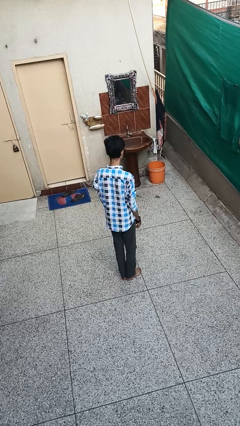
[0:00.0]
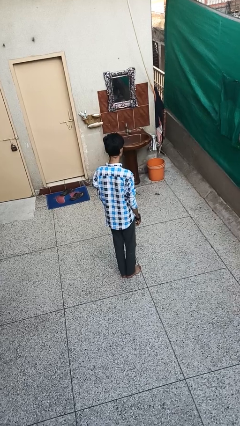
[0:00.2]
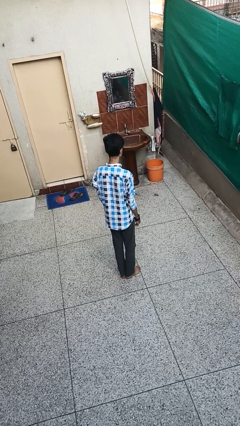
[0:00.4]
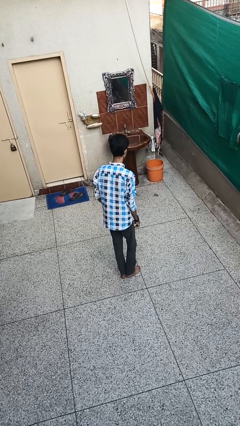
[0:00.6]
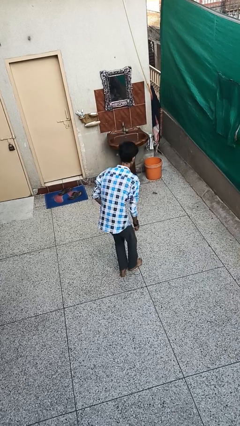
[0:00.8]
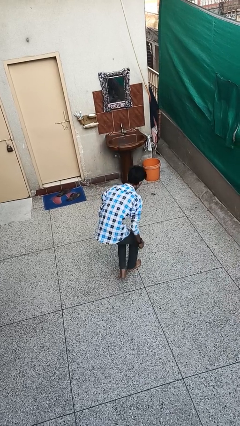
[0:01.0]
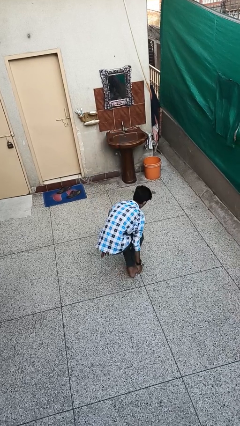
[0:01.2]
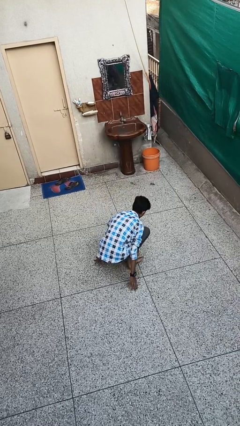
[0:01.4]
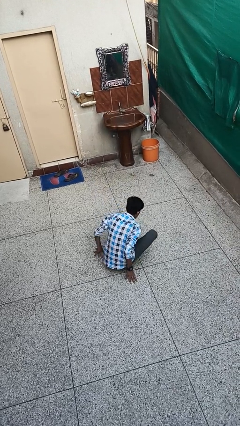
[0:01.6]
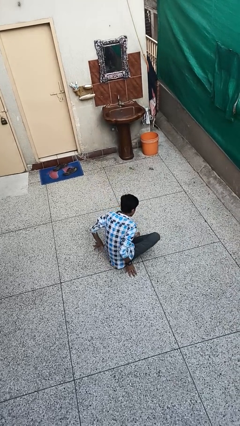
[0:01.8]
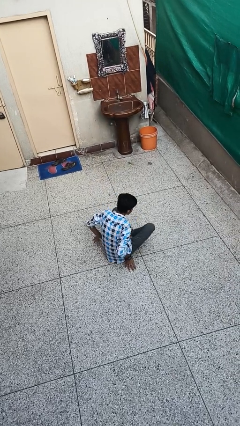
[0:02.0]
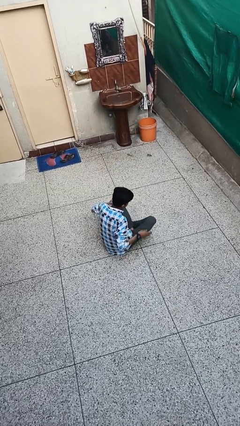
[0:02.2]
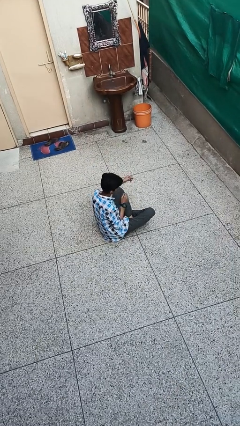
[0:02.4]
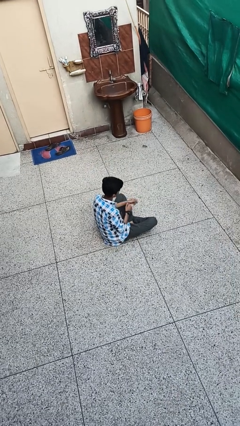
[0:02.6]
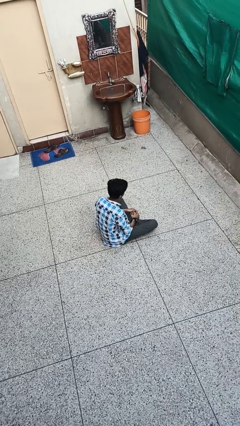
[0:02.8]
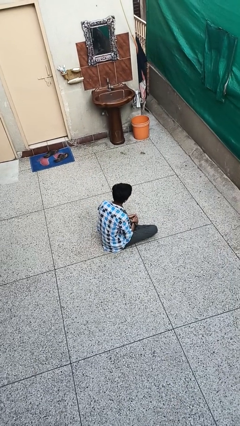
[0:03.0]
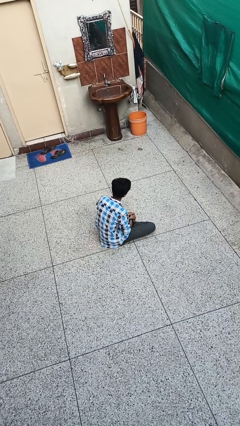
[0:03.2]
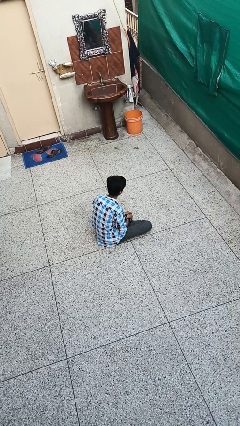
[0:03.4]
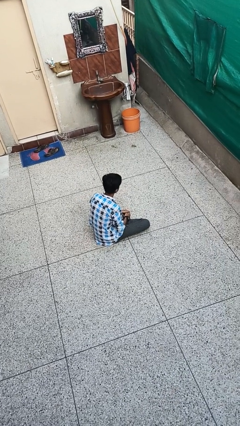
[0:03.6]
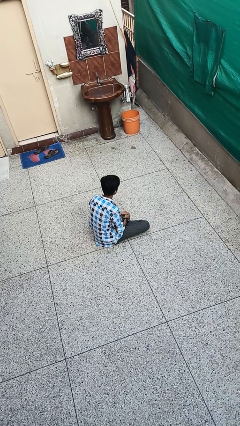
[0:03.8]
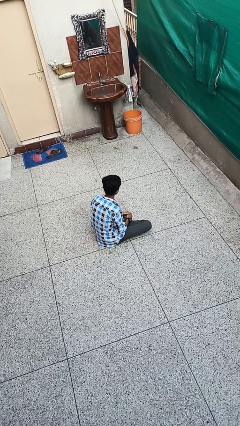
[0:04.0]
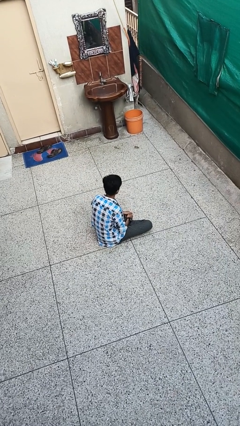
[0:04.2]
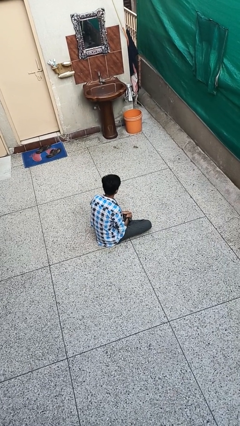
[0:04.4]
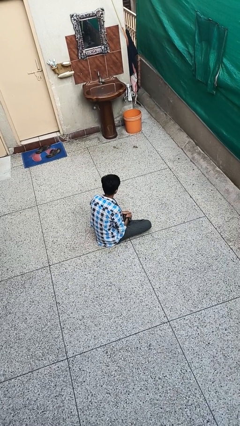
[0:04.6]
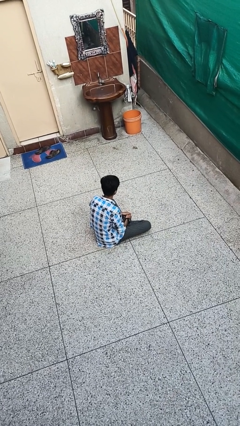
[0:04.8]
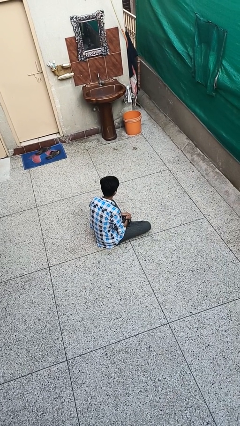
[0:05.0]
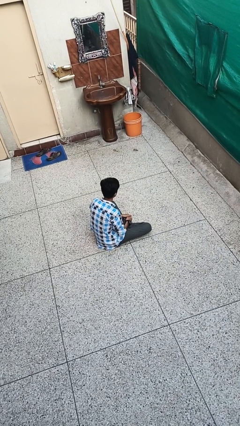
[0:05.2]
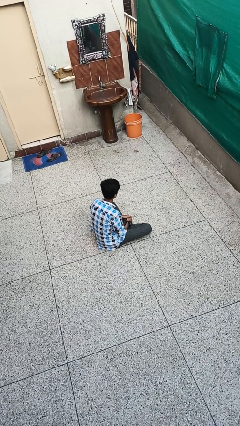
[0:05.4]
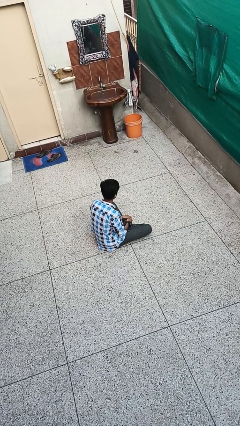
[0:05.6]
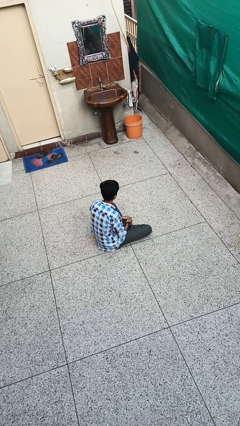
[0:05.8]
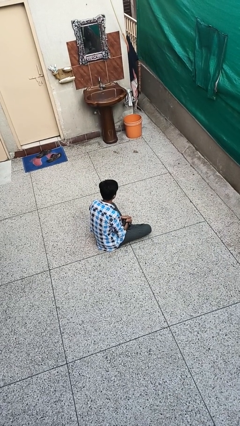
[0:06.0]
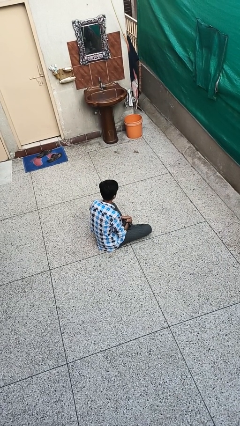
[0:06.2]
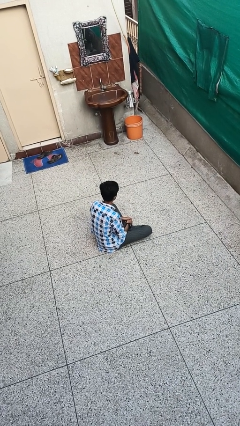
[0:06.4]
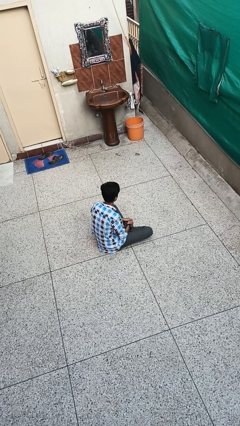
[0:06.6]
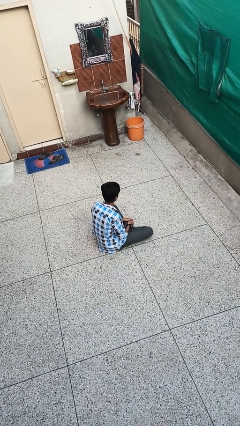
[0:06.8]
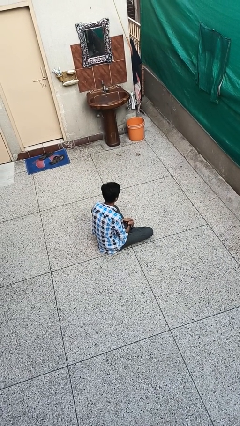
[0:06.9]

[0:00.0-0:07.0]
person sits crisscross

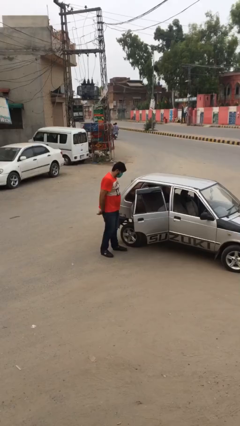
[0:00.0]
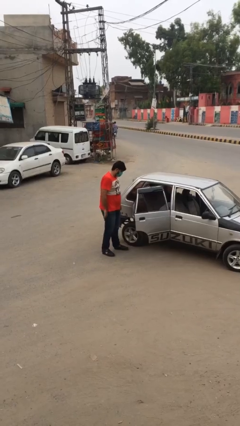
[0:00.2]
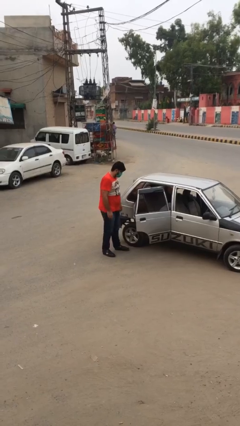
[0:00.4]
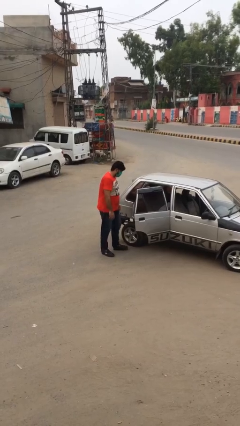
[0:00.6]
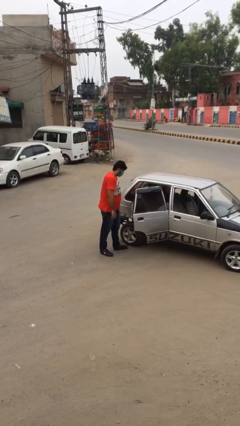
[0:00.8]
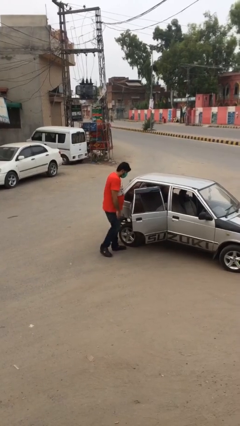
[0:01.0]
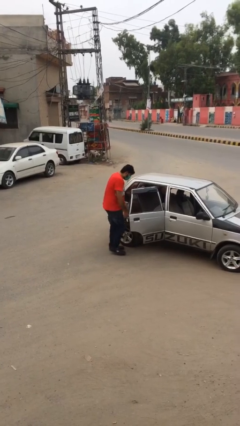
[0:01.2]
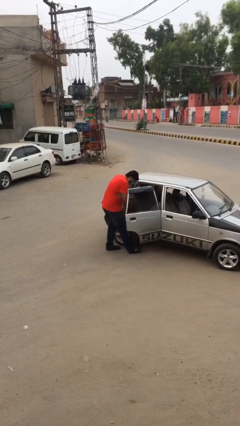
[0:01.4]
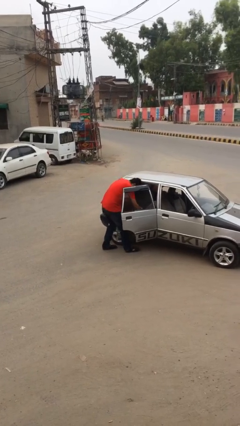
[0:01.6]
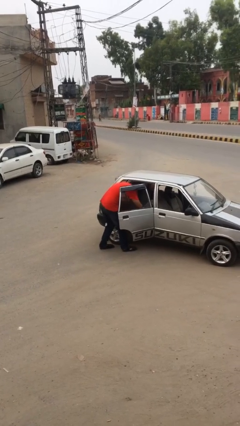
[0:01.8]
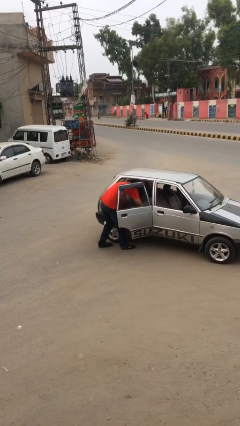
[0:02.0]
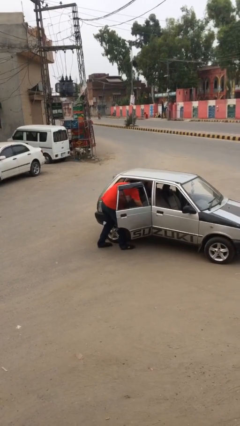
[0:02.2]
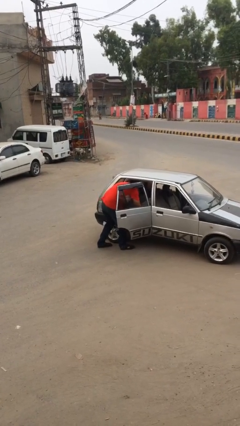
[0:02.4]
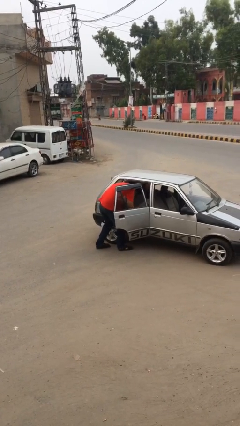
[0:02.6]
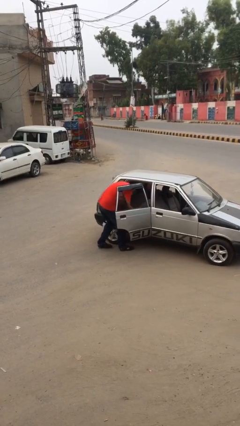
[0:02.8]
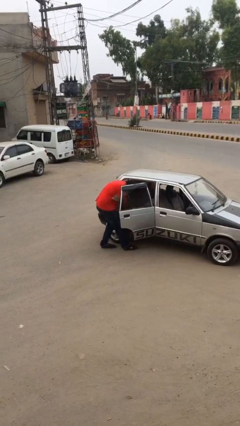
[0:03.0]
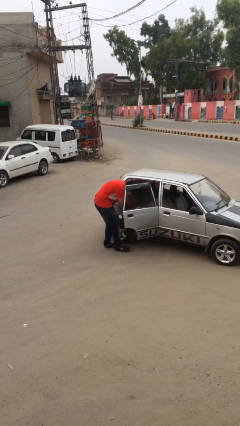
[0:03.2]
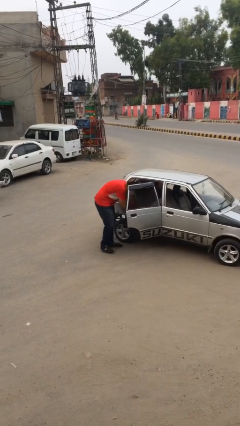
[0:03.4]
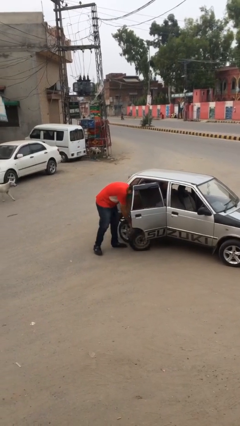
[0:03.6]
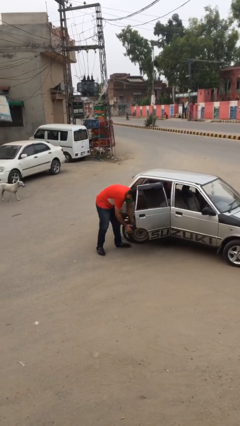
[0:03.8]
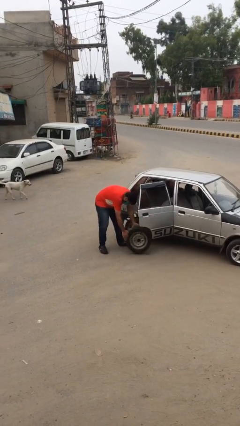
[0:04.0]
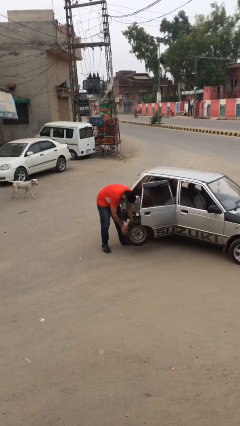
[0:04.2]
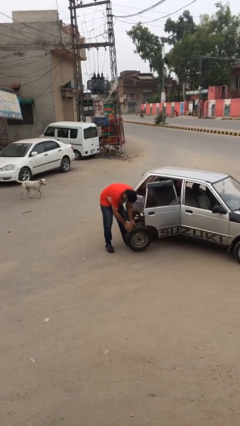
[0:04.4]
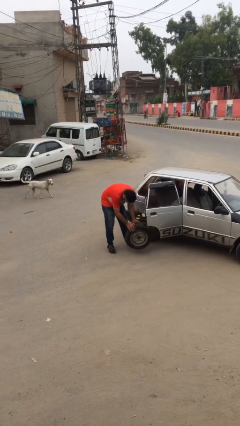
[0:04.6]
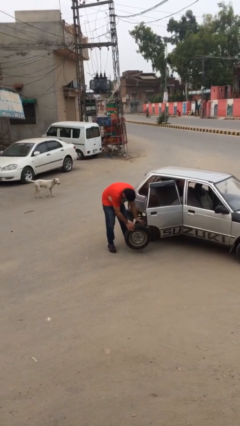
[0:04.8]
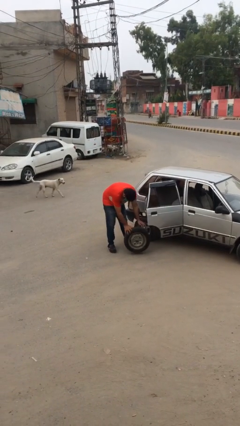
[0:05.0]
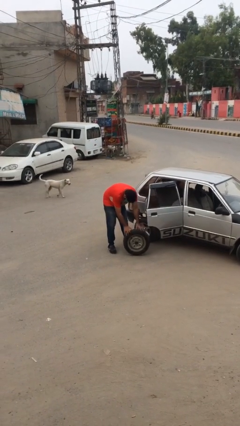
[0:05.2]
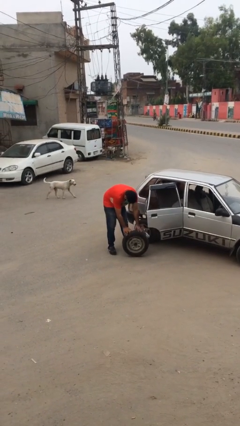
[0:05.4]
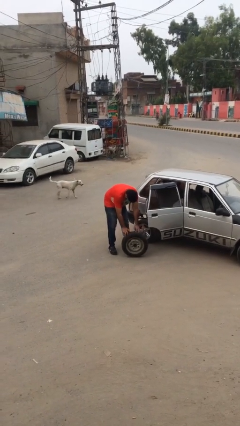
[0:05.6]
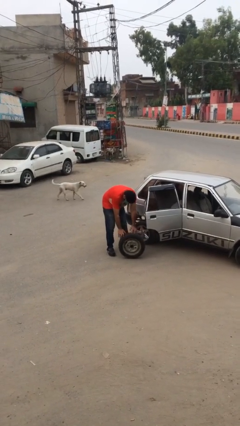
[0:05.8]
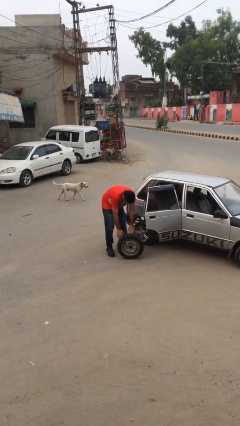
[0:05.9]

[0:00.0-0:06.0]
person unloads car

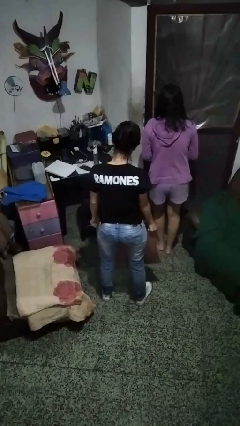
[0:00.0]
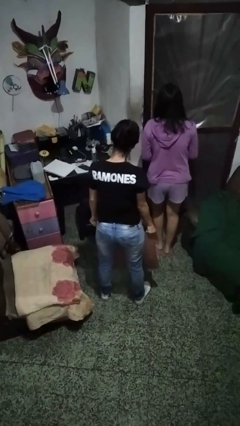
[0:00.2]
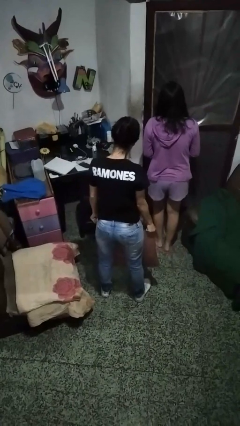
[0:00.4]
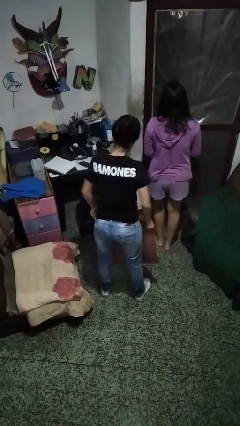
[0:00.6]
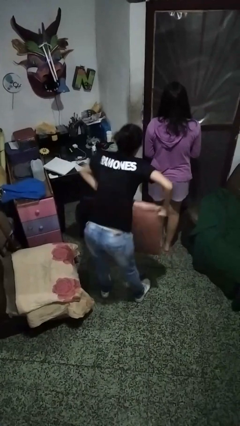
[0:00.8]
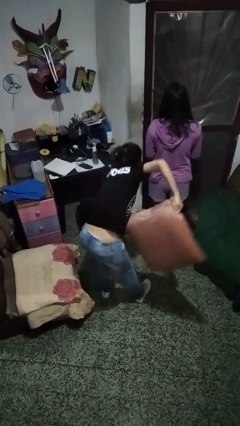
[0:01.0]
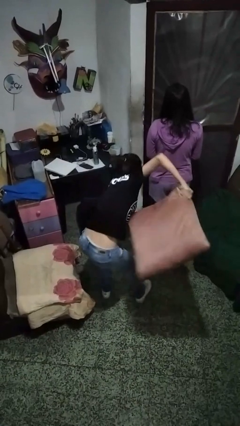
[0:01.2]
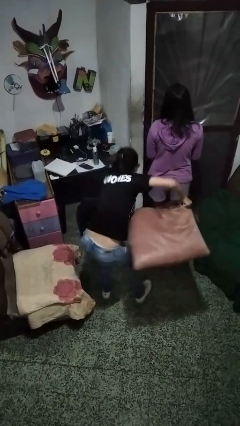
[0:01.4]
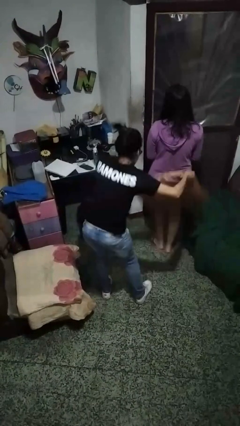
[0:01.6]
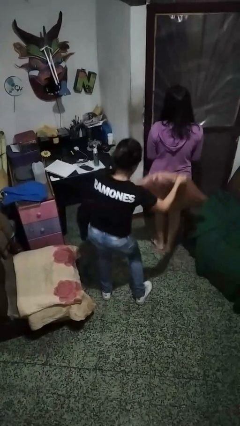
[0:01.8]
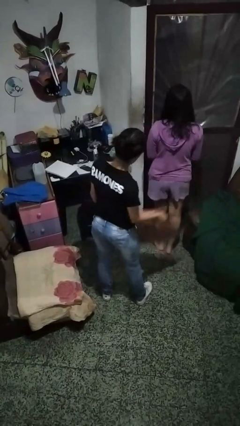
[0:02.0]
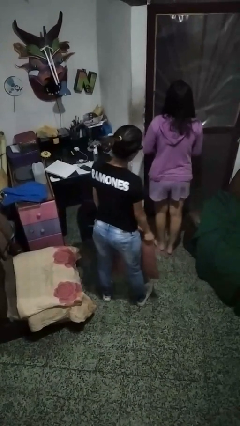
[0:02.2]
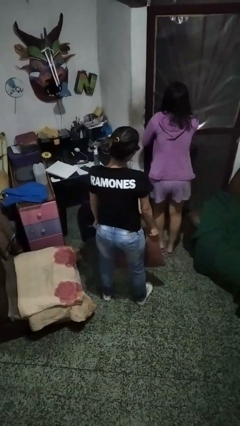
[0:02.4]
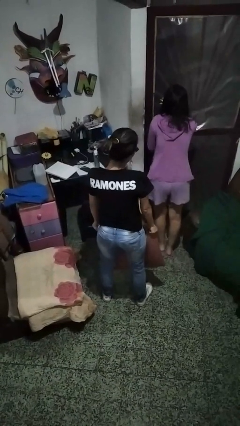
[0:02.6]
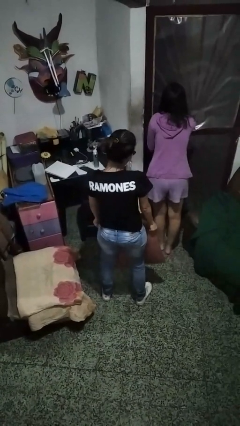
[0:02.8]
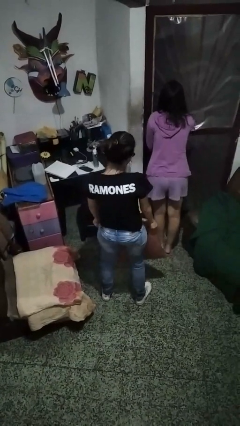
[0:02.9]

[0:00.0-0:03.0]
person hits person with pillow

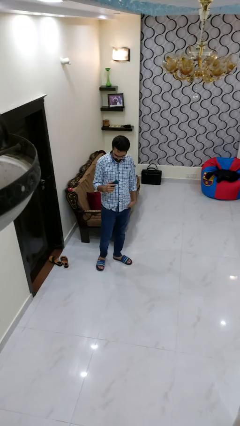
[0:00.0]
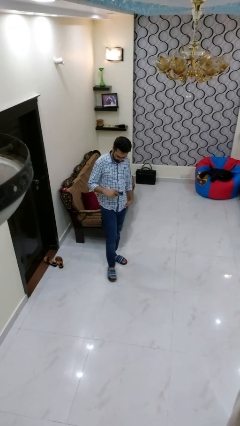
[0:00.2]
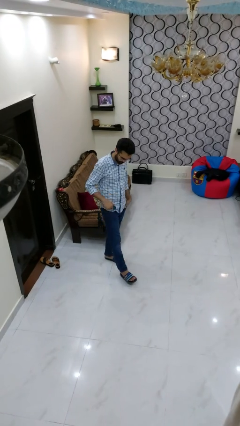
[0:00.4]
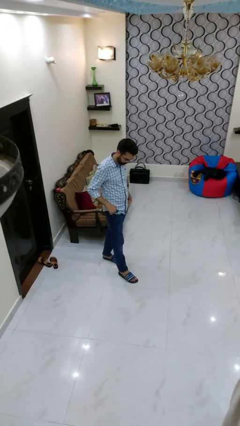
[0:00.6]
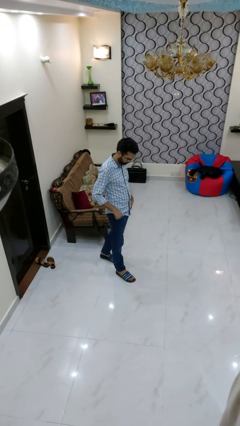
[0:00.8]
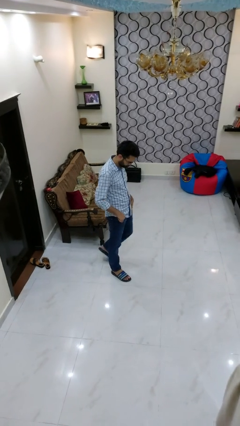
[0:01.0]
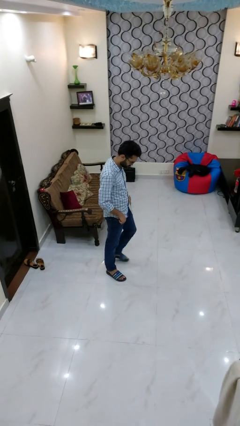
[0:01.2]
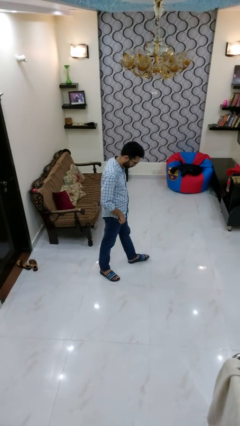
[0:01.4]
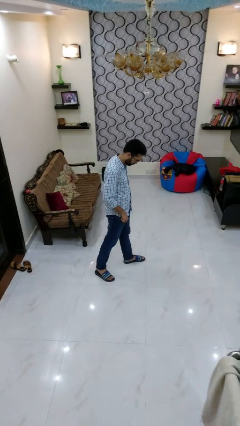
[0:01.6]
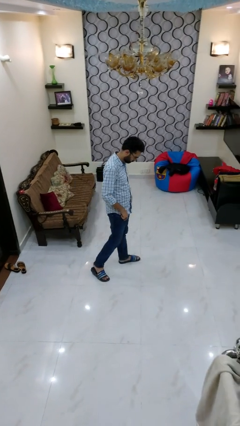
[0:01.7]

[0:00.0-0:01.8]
person puts phone into pocket

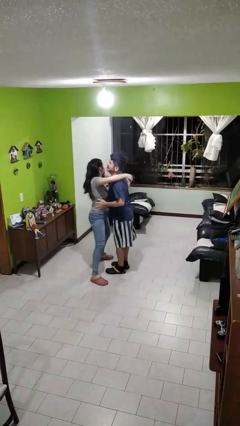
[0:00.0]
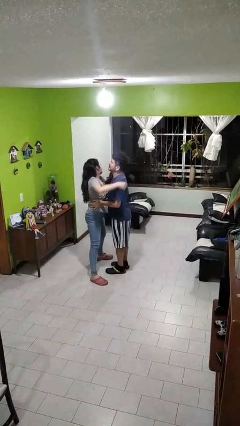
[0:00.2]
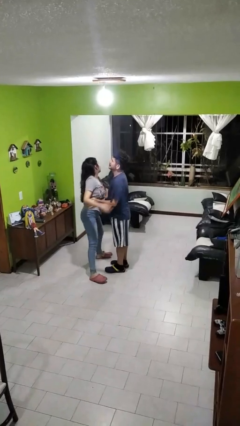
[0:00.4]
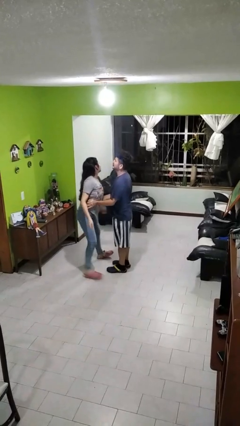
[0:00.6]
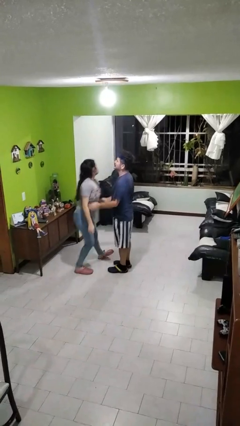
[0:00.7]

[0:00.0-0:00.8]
person puts down person
